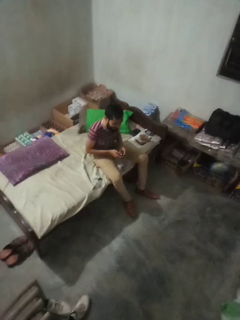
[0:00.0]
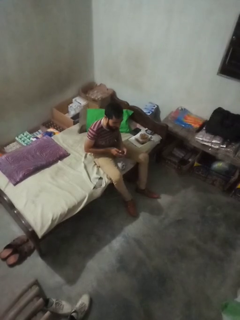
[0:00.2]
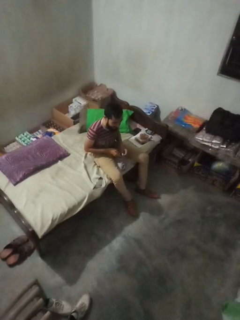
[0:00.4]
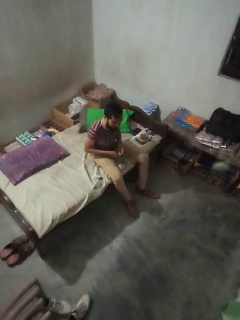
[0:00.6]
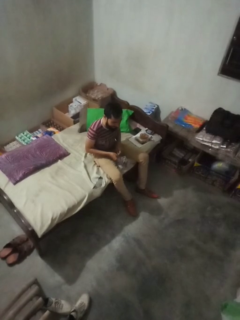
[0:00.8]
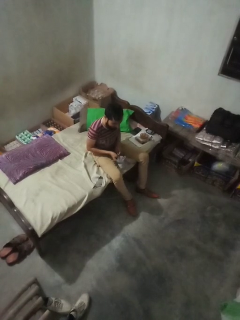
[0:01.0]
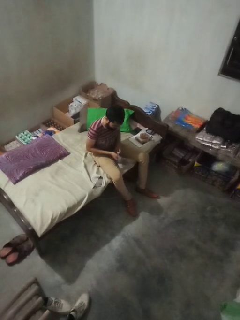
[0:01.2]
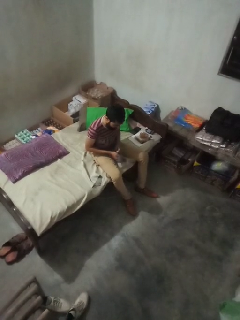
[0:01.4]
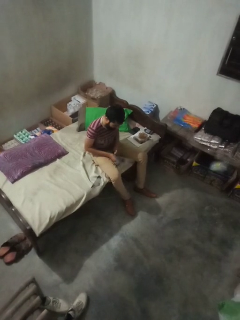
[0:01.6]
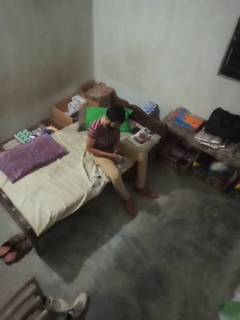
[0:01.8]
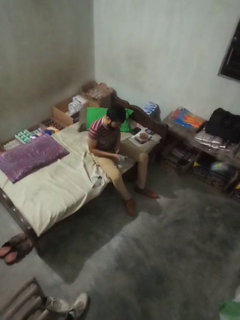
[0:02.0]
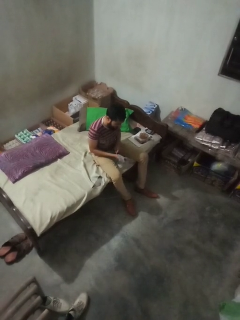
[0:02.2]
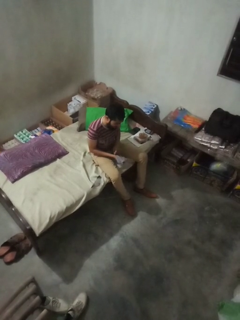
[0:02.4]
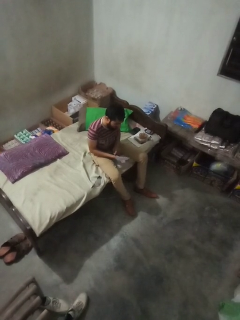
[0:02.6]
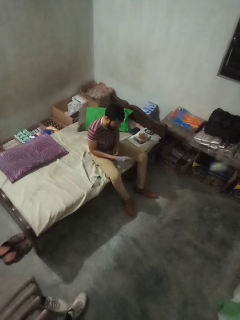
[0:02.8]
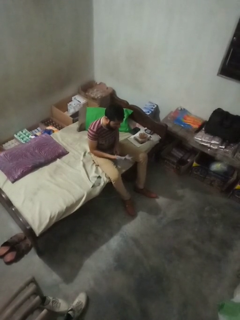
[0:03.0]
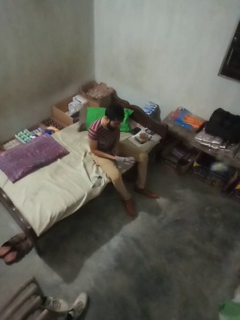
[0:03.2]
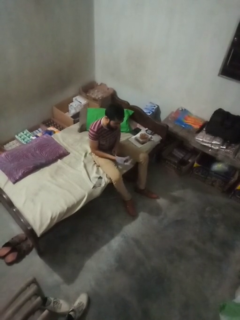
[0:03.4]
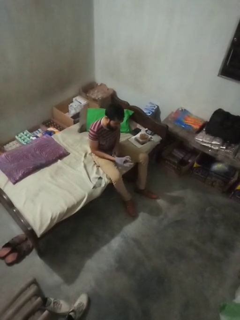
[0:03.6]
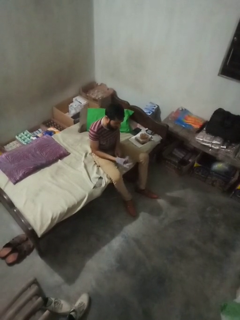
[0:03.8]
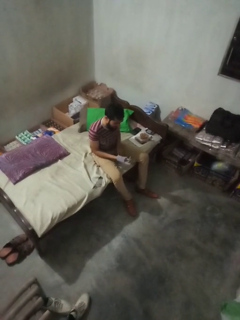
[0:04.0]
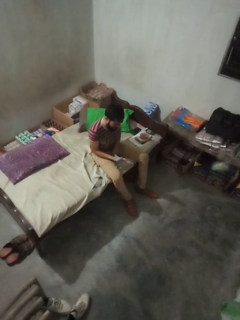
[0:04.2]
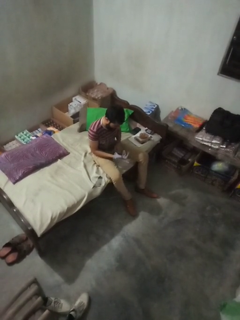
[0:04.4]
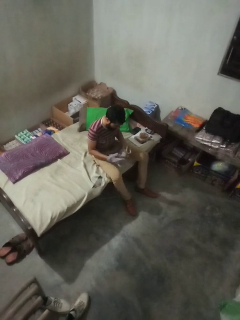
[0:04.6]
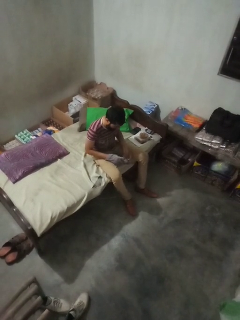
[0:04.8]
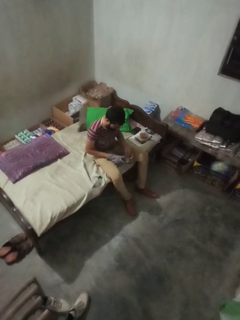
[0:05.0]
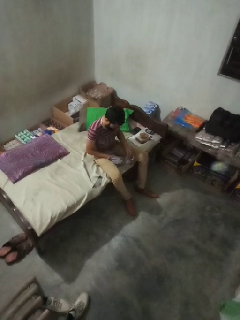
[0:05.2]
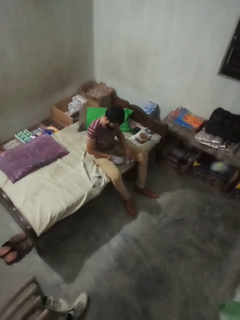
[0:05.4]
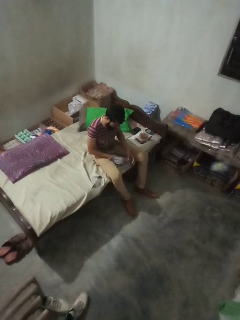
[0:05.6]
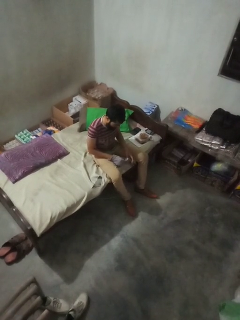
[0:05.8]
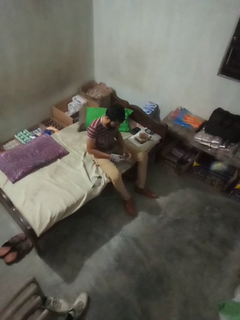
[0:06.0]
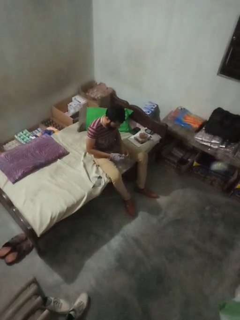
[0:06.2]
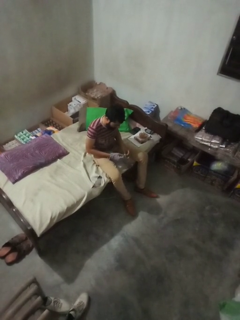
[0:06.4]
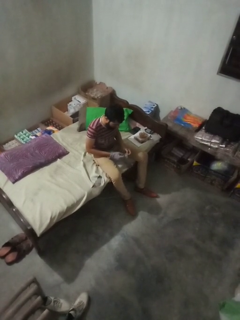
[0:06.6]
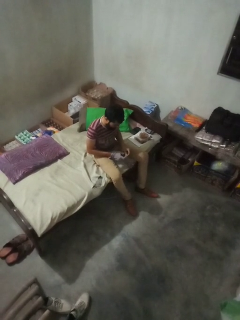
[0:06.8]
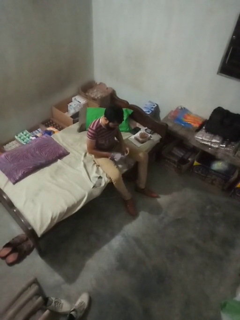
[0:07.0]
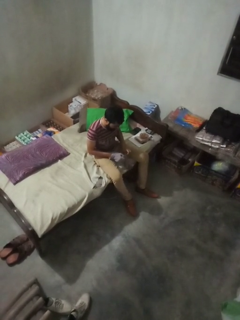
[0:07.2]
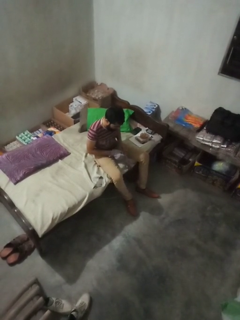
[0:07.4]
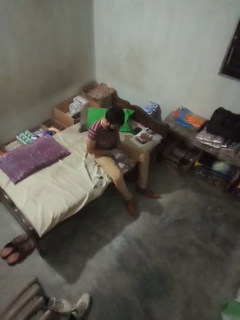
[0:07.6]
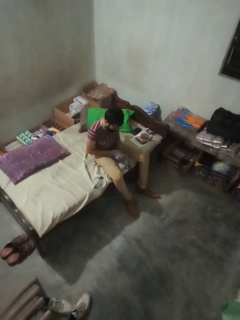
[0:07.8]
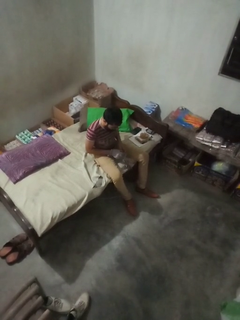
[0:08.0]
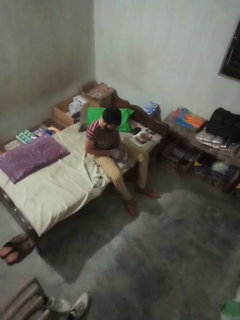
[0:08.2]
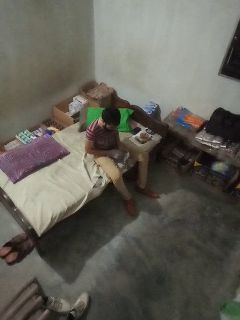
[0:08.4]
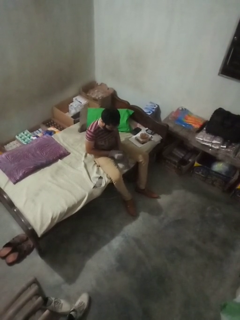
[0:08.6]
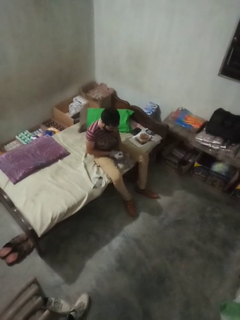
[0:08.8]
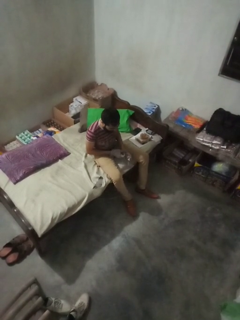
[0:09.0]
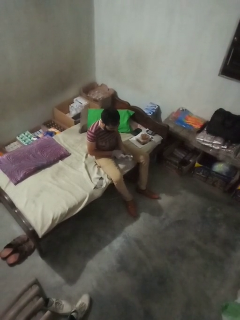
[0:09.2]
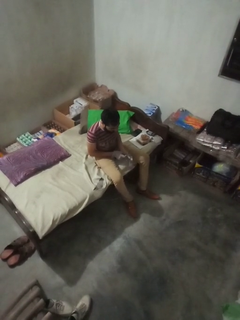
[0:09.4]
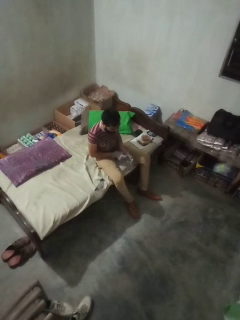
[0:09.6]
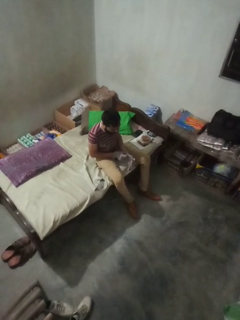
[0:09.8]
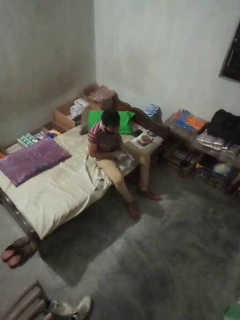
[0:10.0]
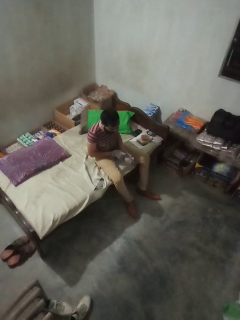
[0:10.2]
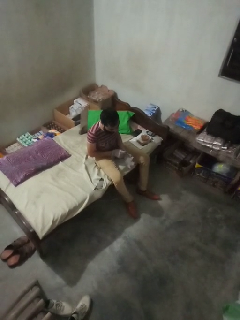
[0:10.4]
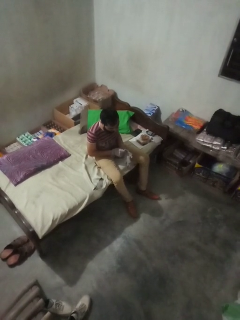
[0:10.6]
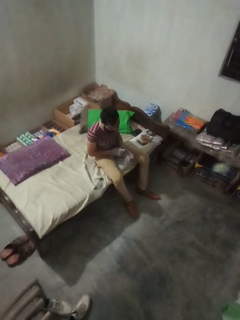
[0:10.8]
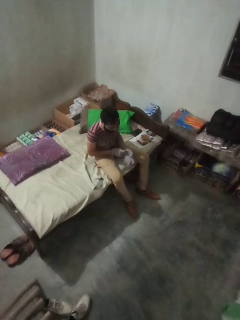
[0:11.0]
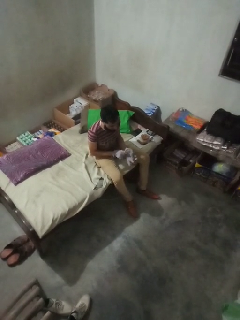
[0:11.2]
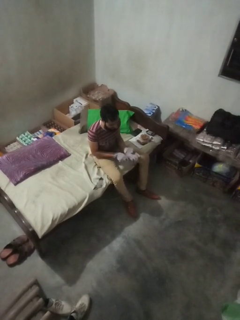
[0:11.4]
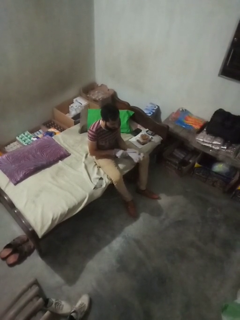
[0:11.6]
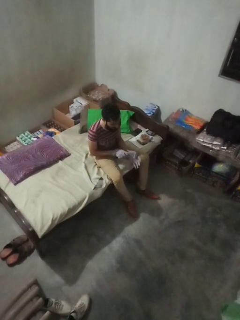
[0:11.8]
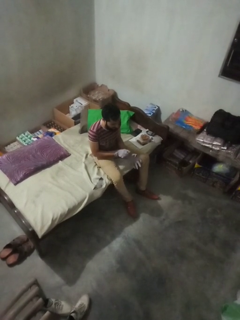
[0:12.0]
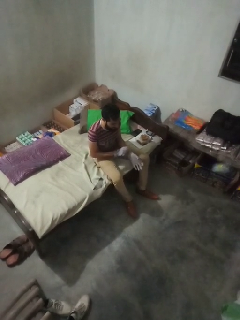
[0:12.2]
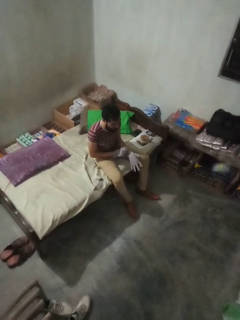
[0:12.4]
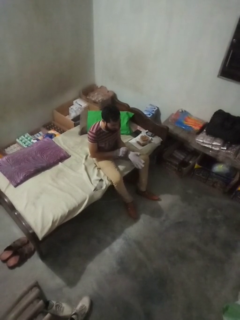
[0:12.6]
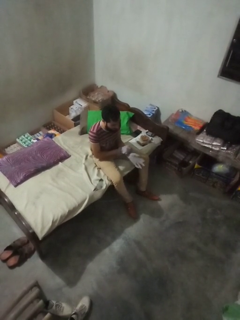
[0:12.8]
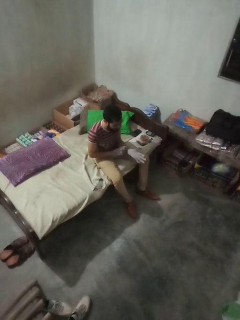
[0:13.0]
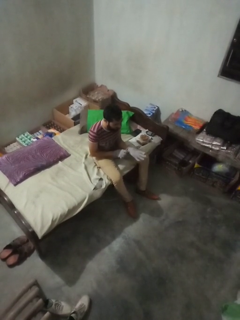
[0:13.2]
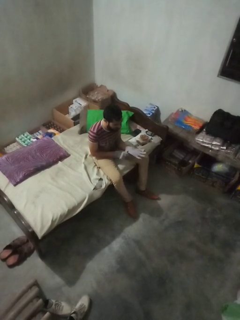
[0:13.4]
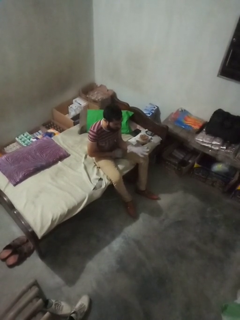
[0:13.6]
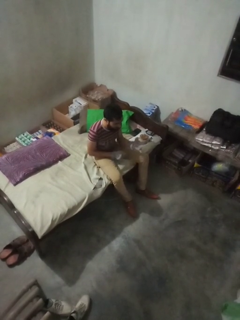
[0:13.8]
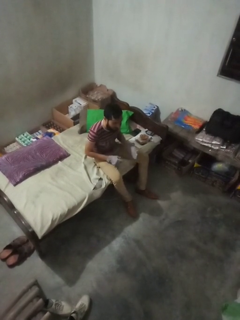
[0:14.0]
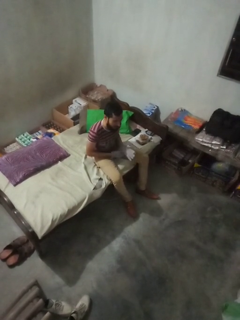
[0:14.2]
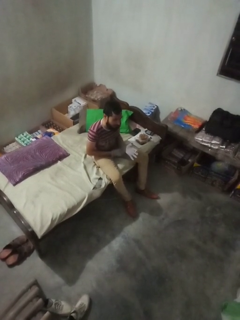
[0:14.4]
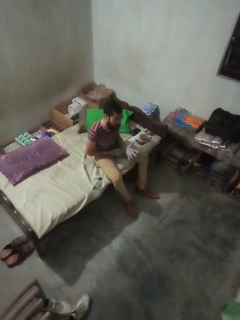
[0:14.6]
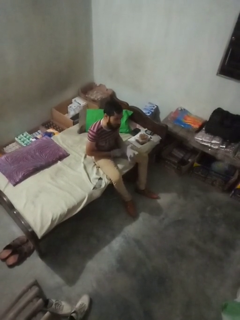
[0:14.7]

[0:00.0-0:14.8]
person puts on gloves

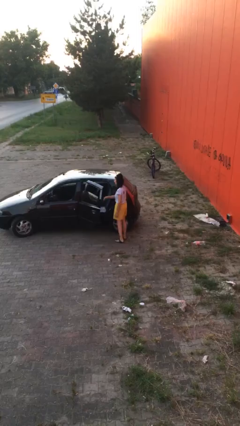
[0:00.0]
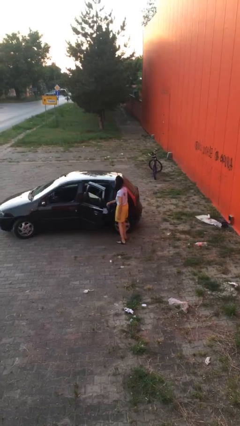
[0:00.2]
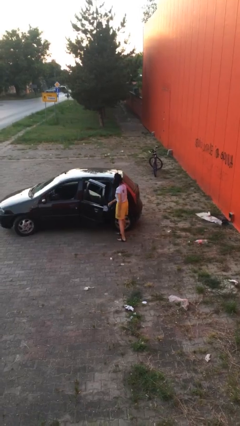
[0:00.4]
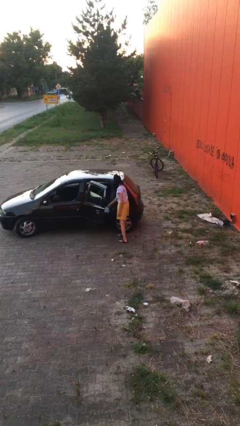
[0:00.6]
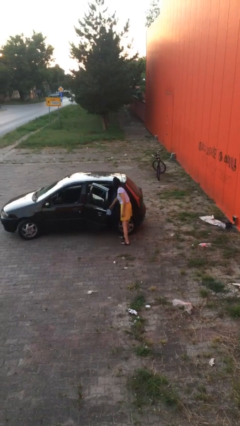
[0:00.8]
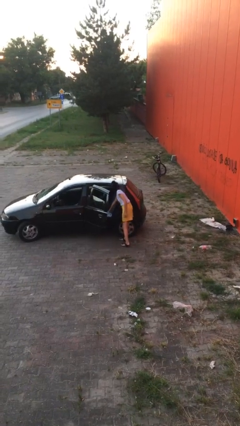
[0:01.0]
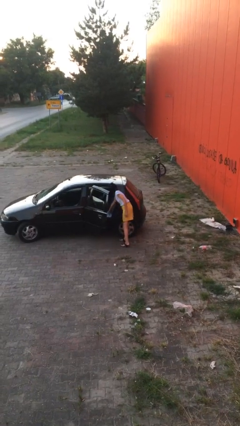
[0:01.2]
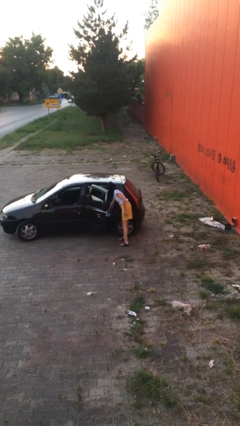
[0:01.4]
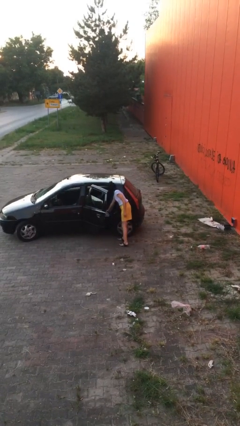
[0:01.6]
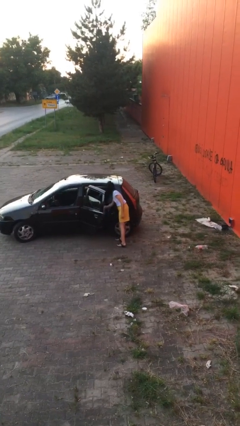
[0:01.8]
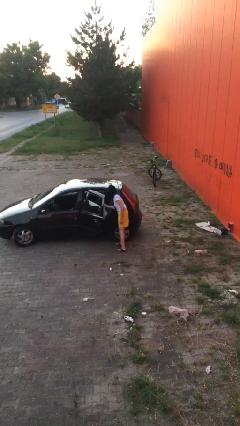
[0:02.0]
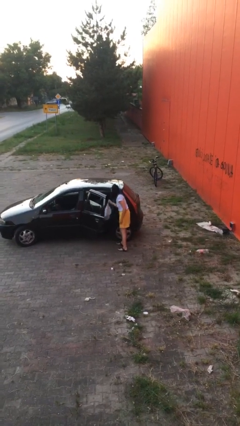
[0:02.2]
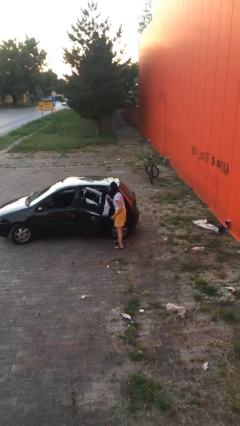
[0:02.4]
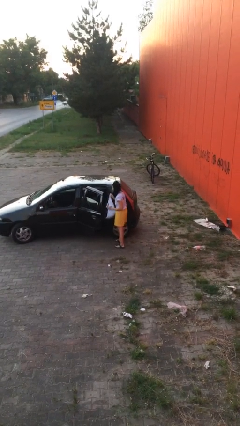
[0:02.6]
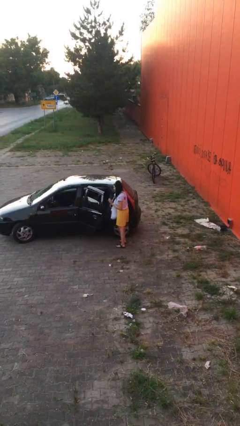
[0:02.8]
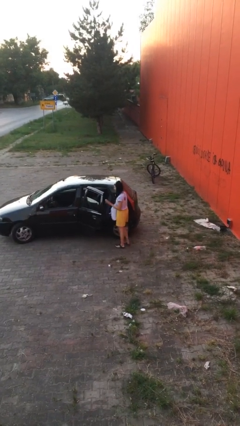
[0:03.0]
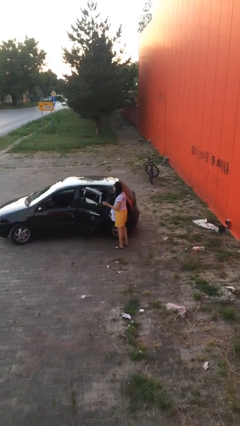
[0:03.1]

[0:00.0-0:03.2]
person unloads car

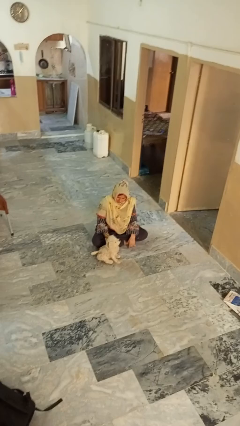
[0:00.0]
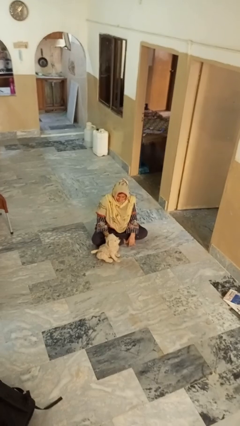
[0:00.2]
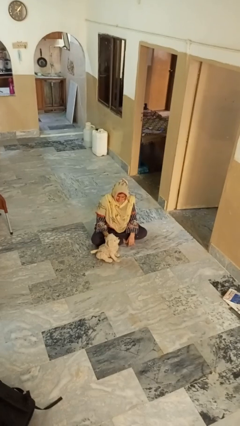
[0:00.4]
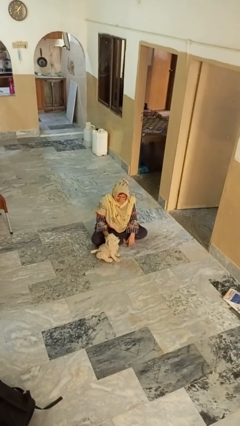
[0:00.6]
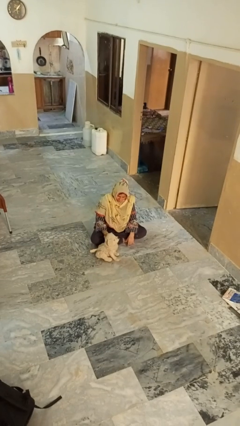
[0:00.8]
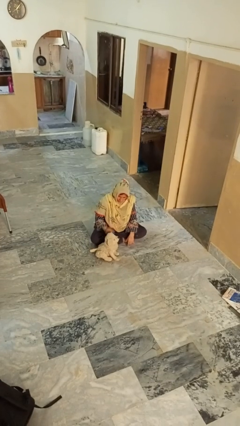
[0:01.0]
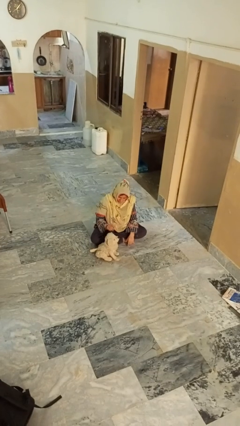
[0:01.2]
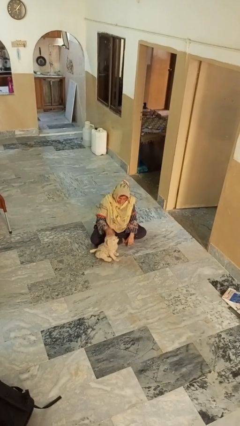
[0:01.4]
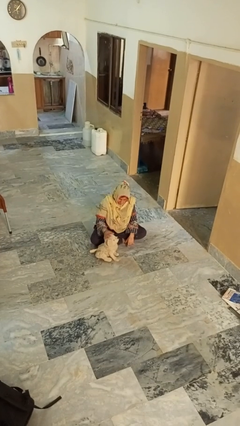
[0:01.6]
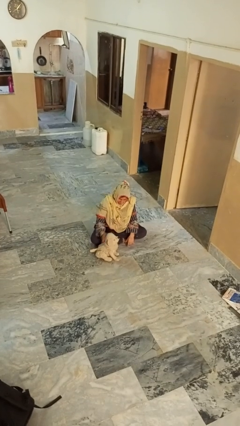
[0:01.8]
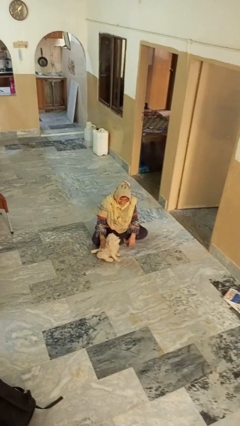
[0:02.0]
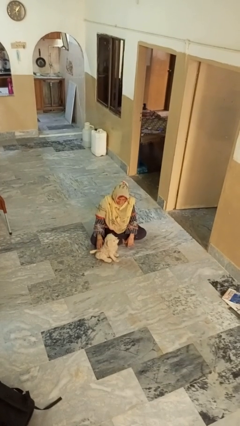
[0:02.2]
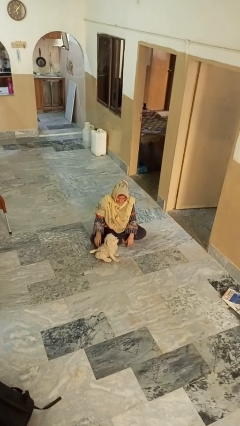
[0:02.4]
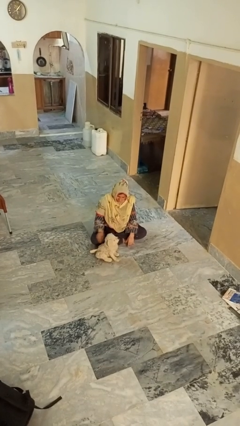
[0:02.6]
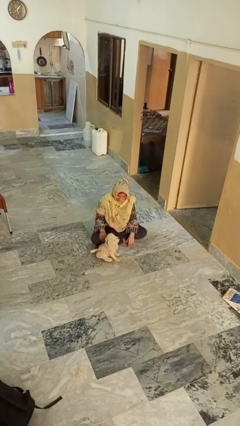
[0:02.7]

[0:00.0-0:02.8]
person pets dog

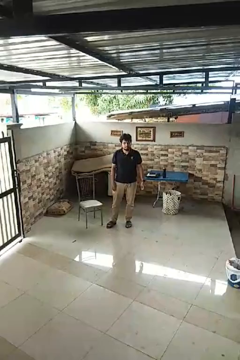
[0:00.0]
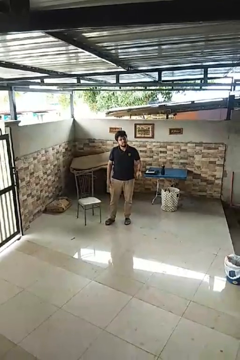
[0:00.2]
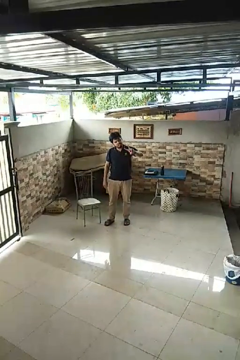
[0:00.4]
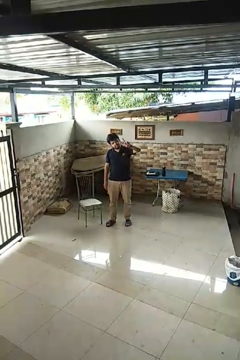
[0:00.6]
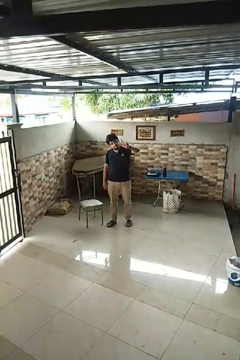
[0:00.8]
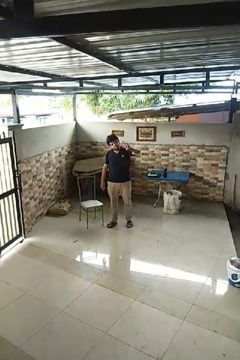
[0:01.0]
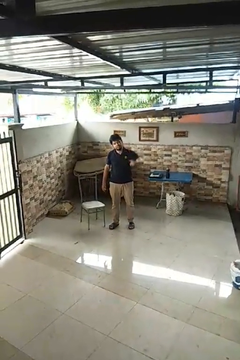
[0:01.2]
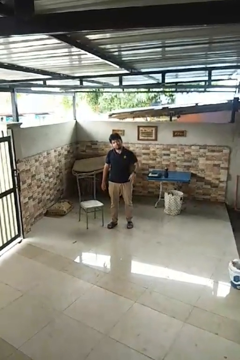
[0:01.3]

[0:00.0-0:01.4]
person gestures peace
